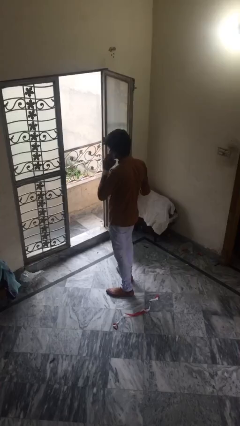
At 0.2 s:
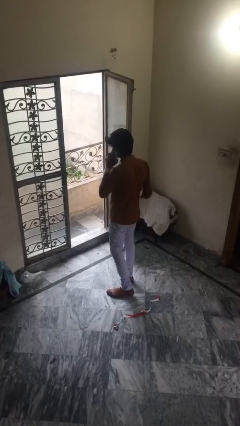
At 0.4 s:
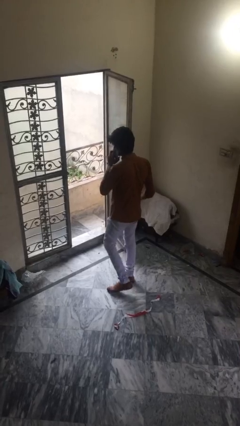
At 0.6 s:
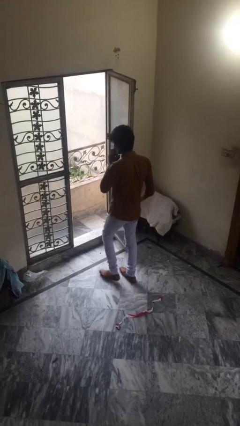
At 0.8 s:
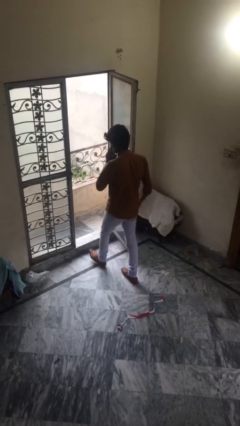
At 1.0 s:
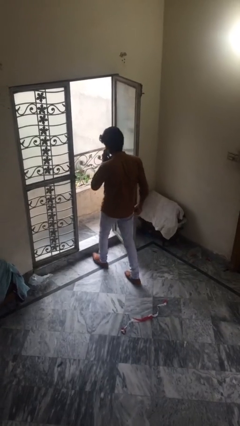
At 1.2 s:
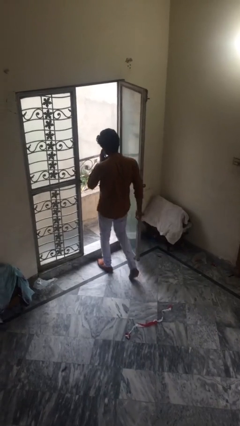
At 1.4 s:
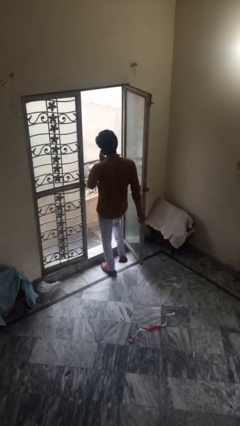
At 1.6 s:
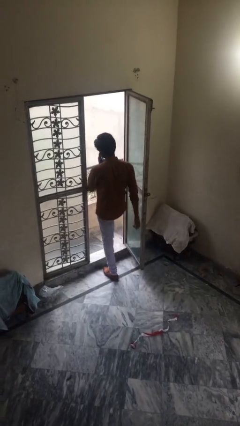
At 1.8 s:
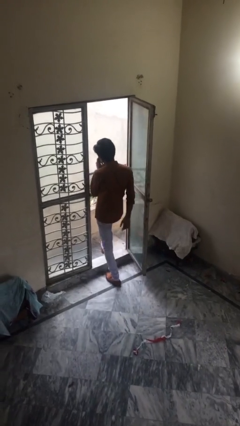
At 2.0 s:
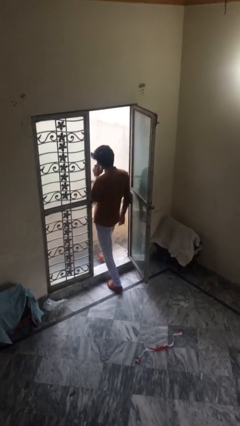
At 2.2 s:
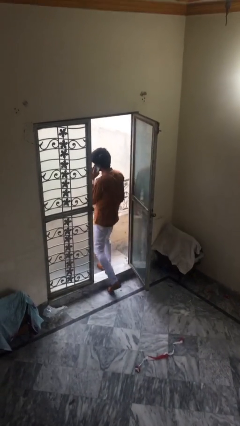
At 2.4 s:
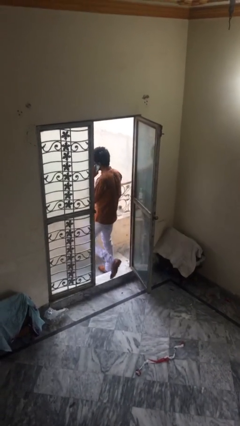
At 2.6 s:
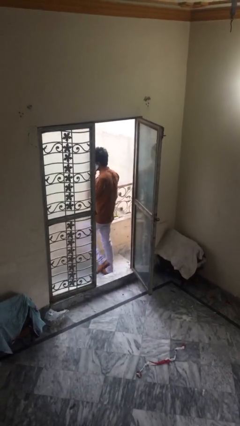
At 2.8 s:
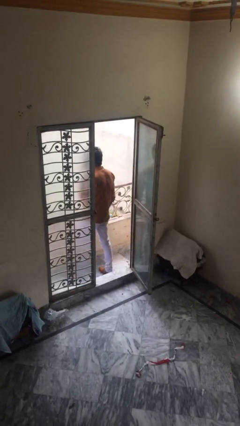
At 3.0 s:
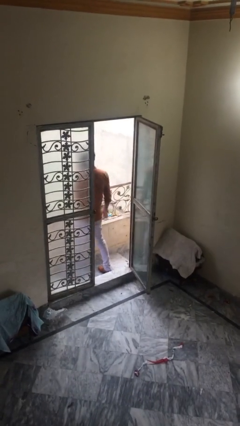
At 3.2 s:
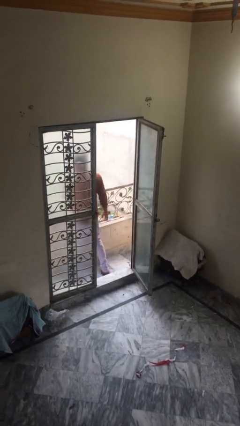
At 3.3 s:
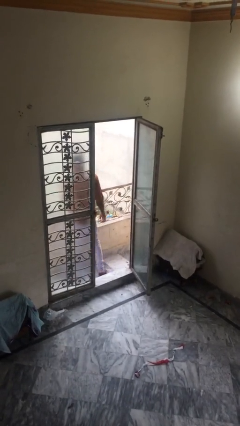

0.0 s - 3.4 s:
person exits scene through structure

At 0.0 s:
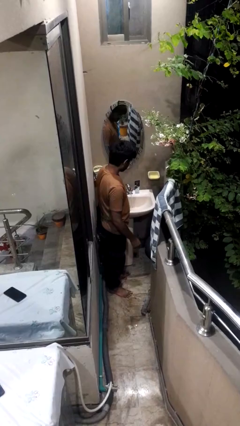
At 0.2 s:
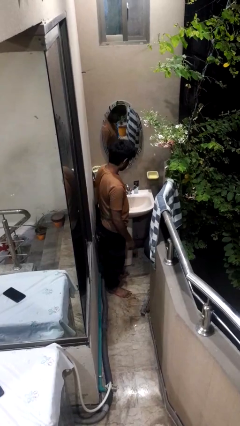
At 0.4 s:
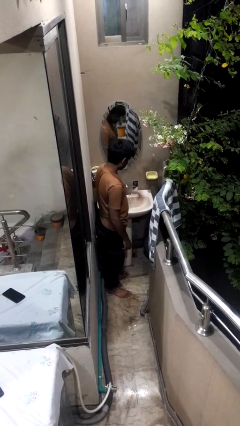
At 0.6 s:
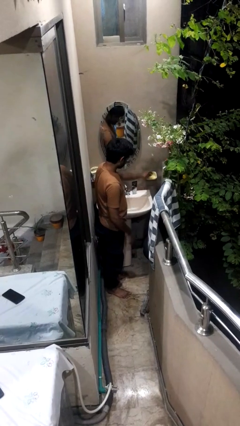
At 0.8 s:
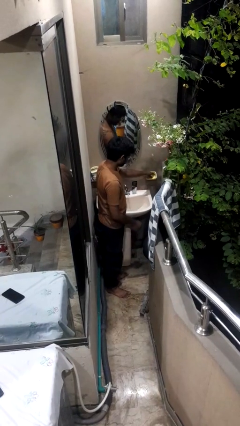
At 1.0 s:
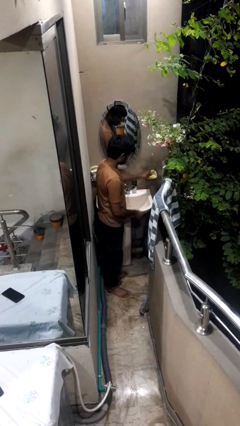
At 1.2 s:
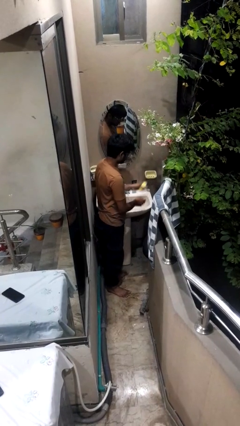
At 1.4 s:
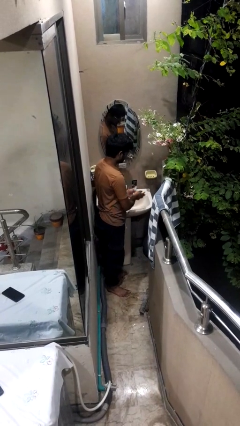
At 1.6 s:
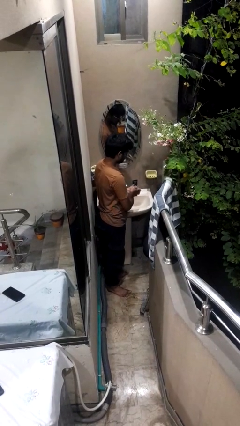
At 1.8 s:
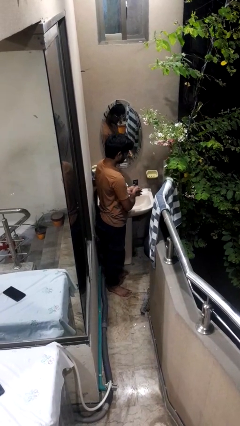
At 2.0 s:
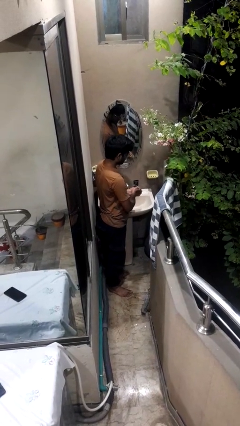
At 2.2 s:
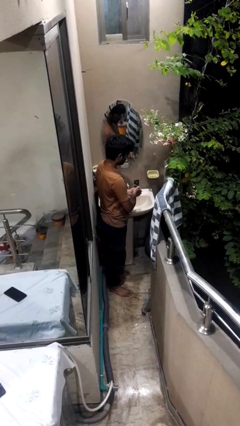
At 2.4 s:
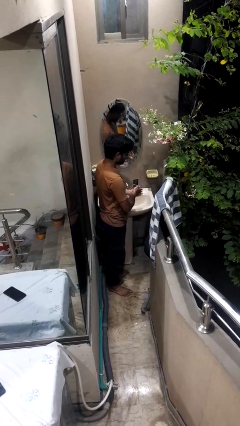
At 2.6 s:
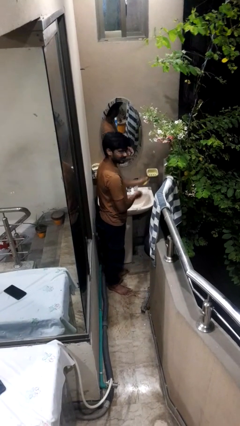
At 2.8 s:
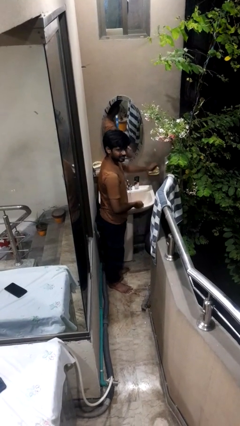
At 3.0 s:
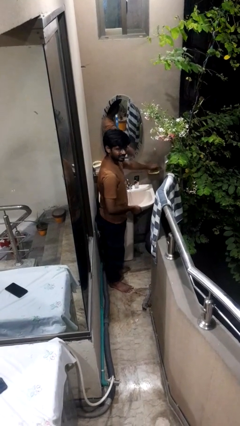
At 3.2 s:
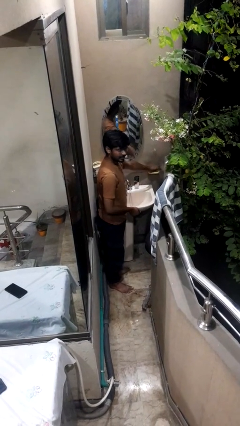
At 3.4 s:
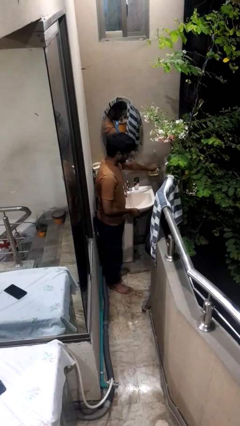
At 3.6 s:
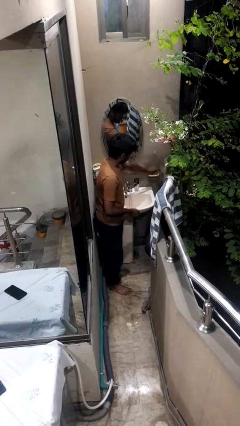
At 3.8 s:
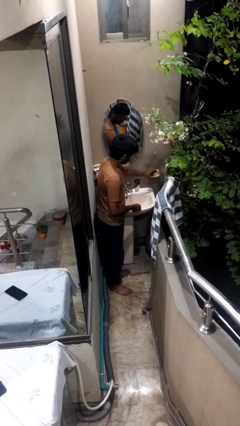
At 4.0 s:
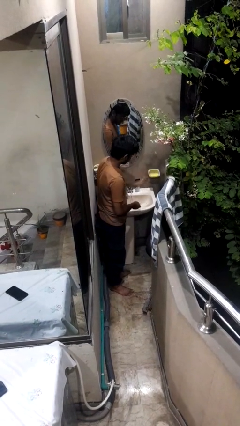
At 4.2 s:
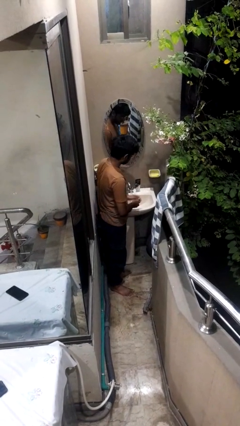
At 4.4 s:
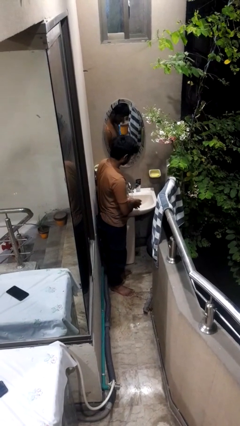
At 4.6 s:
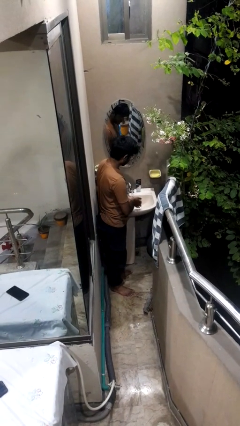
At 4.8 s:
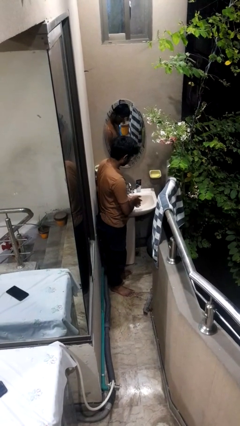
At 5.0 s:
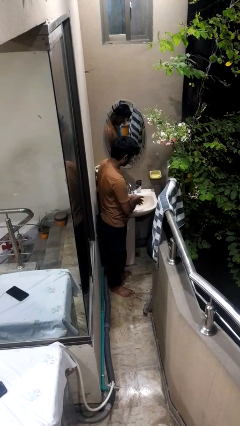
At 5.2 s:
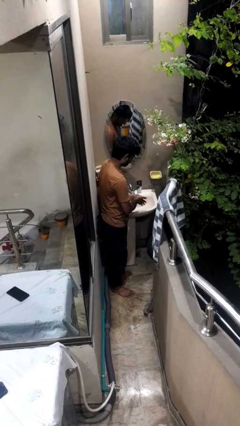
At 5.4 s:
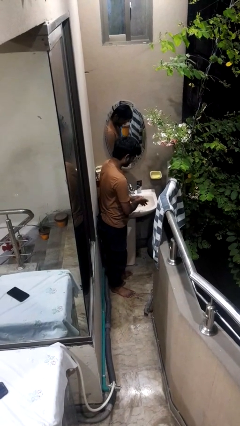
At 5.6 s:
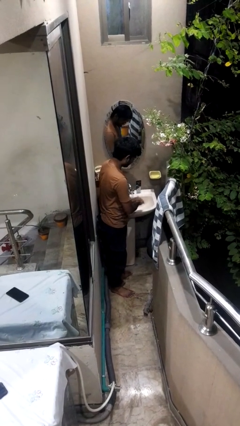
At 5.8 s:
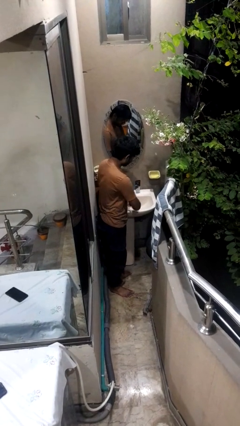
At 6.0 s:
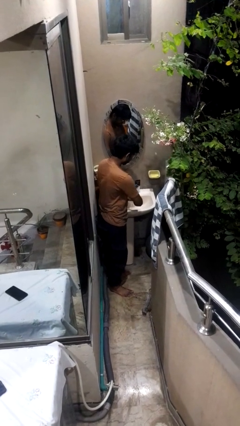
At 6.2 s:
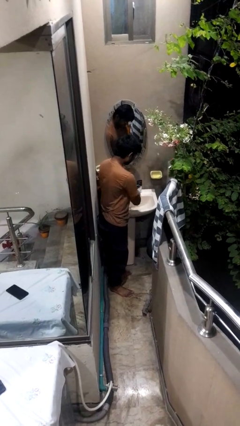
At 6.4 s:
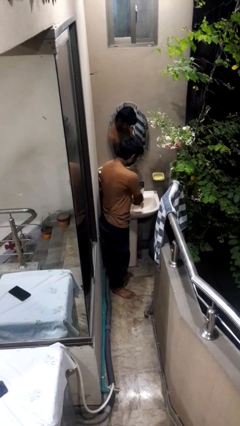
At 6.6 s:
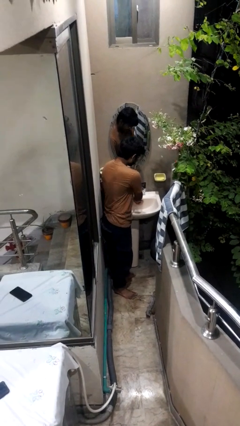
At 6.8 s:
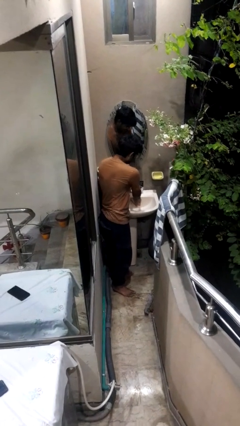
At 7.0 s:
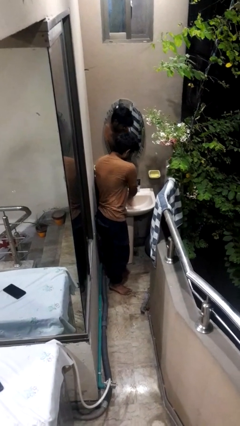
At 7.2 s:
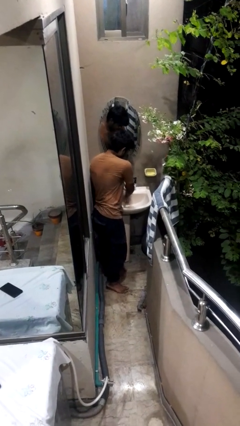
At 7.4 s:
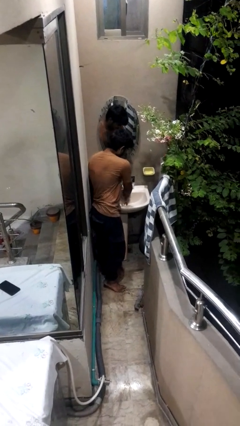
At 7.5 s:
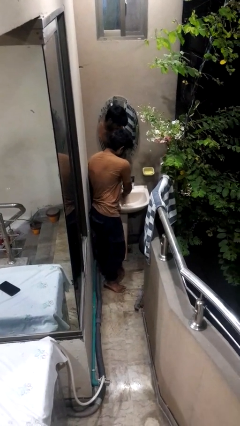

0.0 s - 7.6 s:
person washes hands

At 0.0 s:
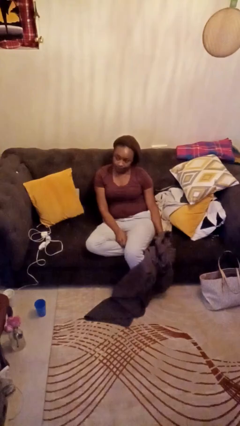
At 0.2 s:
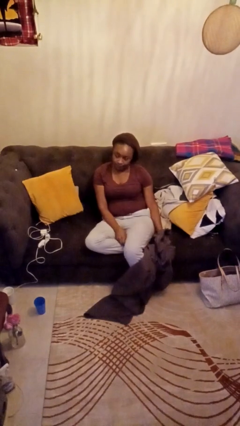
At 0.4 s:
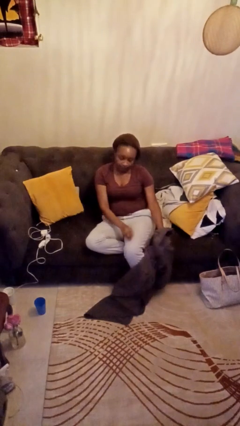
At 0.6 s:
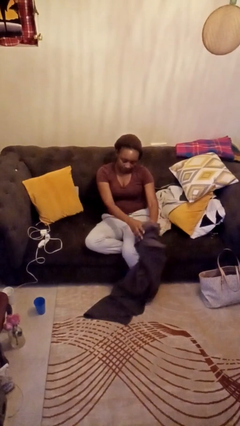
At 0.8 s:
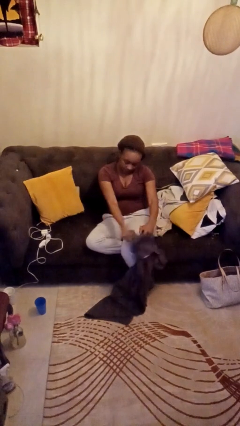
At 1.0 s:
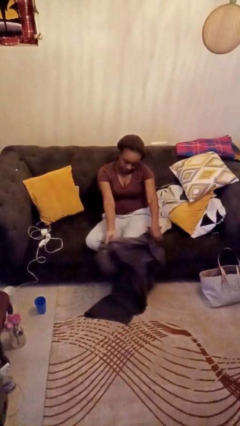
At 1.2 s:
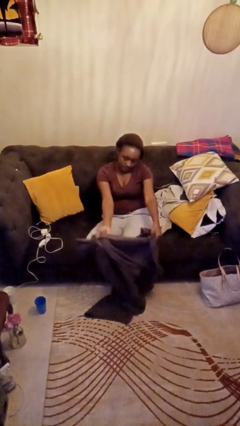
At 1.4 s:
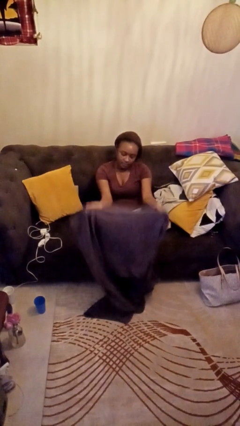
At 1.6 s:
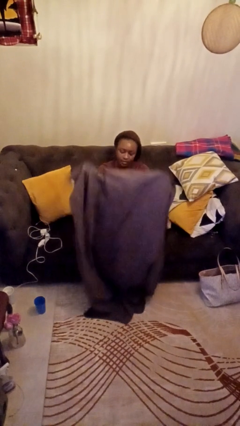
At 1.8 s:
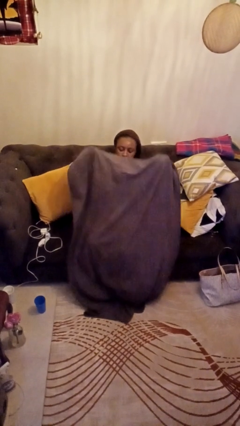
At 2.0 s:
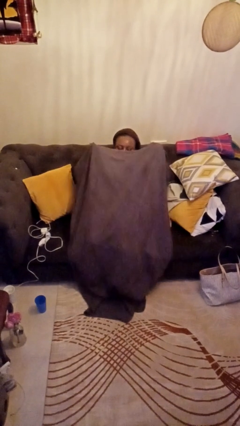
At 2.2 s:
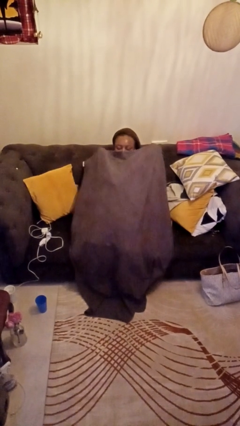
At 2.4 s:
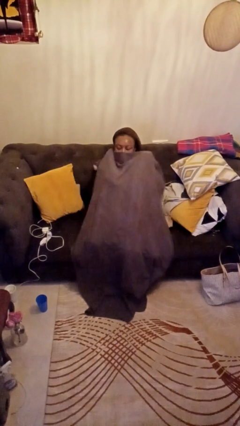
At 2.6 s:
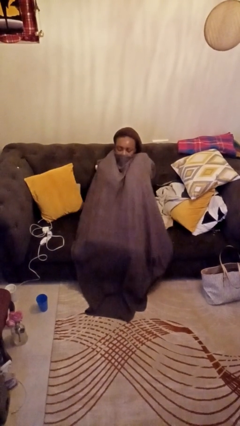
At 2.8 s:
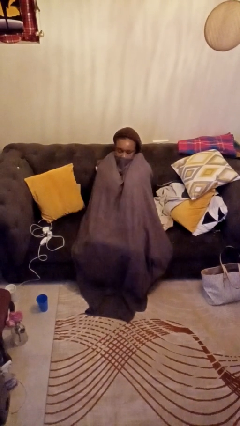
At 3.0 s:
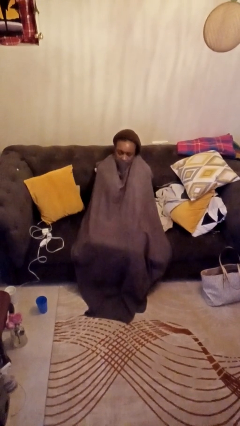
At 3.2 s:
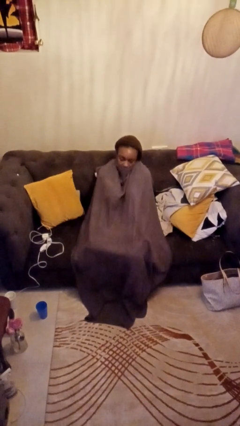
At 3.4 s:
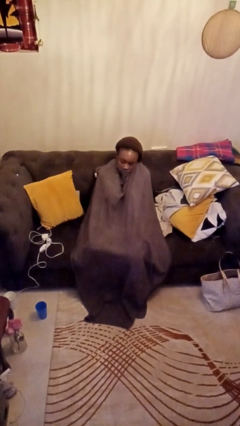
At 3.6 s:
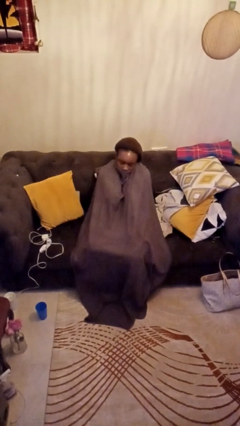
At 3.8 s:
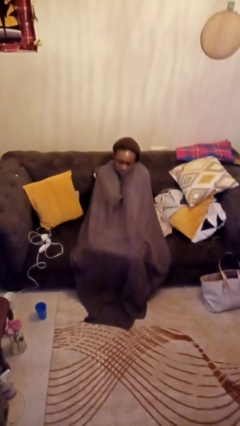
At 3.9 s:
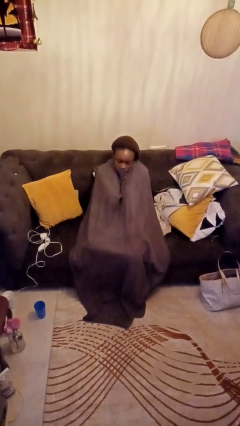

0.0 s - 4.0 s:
person covers with blanket

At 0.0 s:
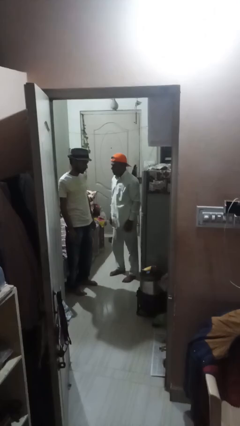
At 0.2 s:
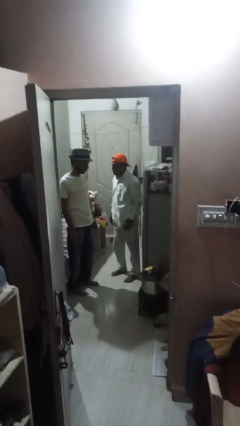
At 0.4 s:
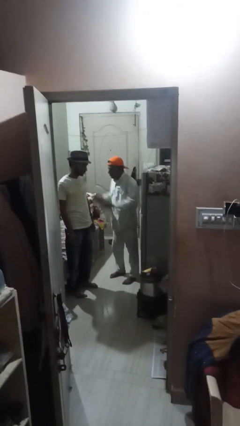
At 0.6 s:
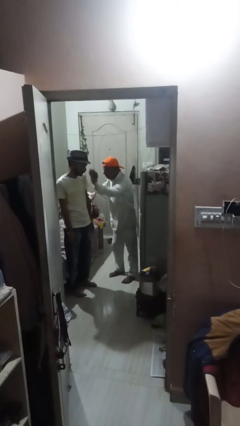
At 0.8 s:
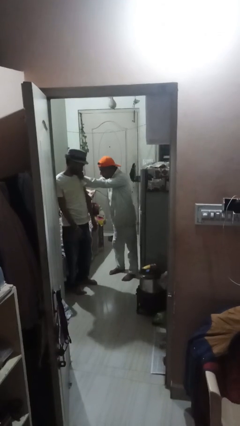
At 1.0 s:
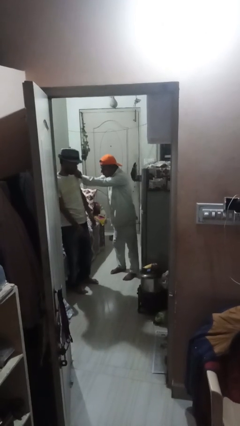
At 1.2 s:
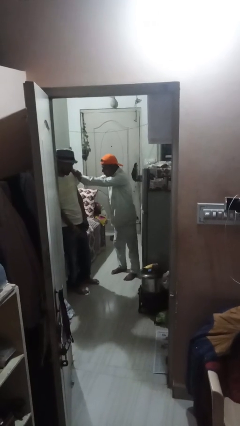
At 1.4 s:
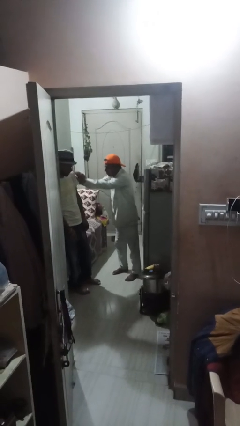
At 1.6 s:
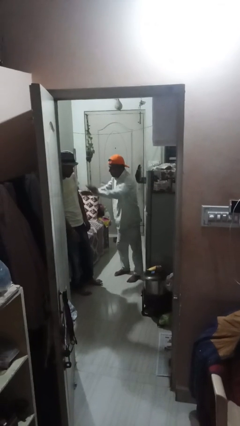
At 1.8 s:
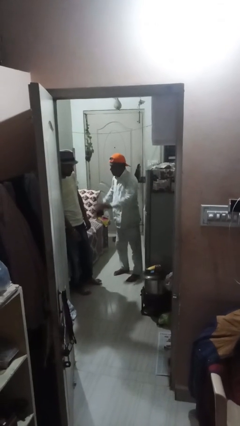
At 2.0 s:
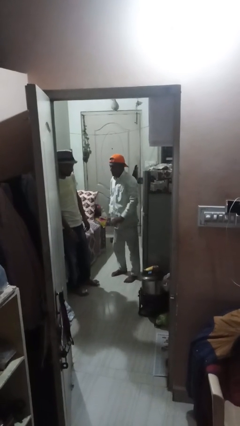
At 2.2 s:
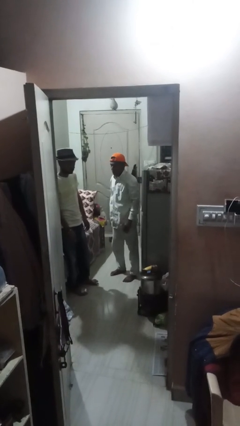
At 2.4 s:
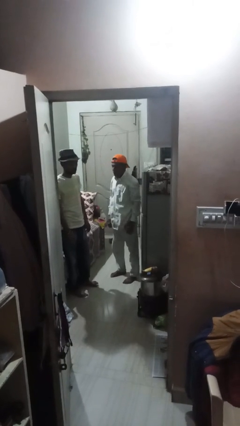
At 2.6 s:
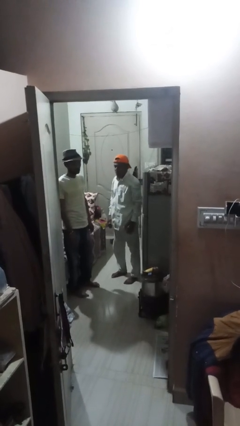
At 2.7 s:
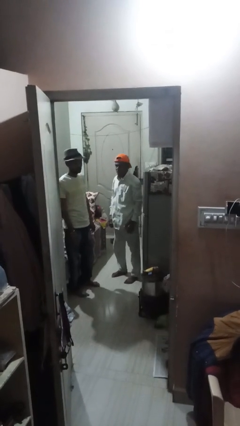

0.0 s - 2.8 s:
person shoves person
